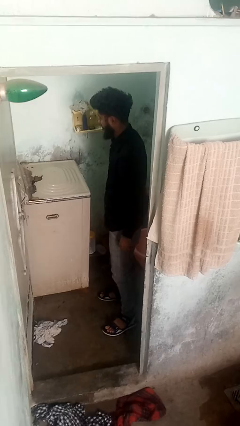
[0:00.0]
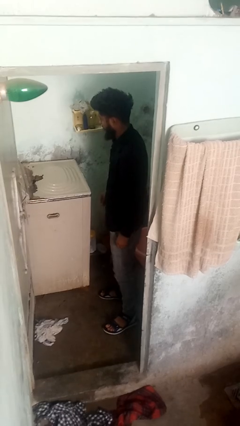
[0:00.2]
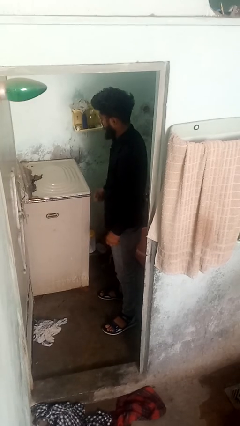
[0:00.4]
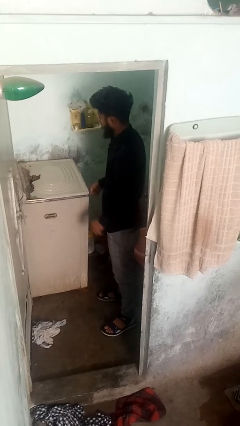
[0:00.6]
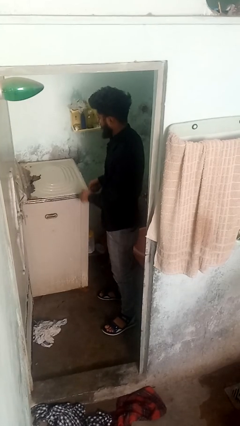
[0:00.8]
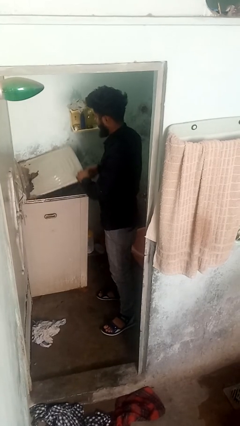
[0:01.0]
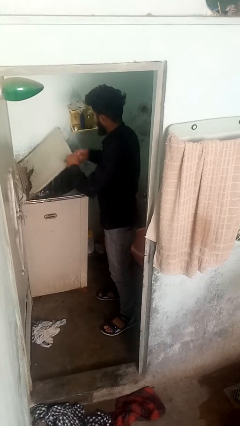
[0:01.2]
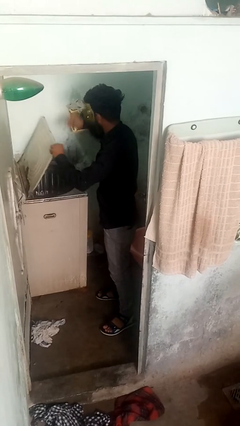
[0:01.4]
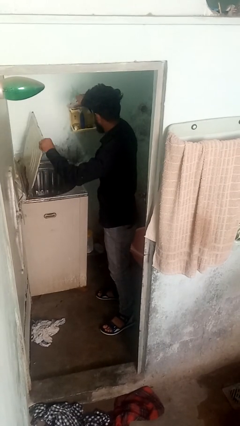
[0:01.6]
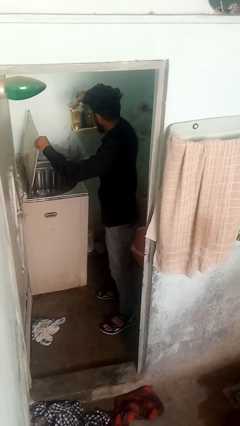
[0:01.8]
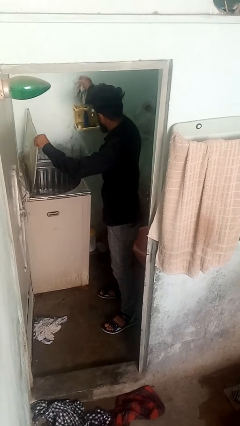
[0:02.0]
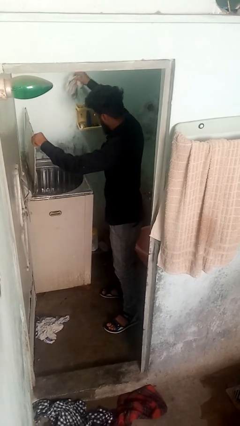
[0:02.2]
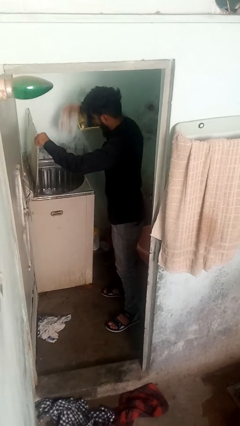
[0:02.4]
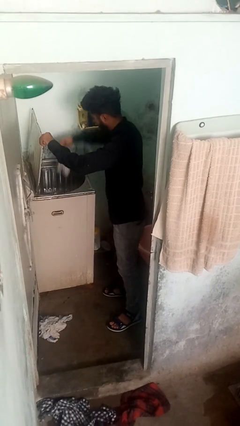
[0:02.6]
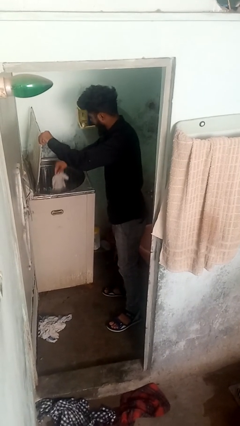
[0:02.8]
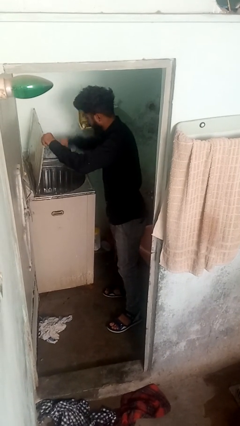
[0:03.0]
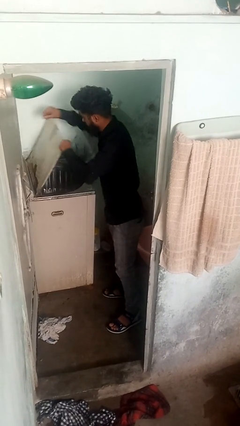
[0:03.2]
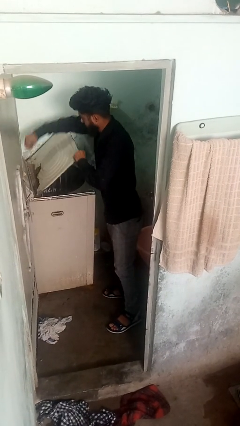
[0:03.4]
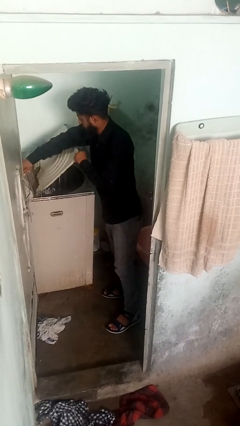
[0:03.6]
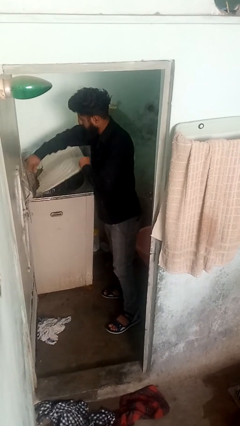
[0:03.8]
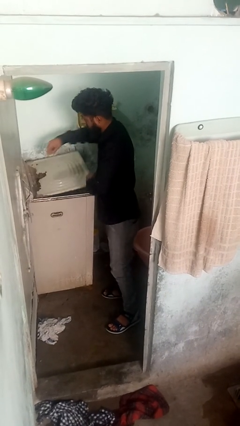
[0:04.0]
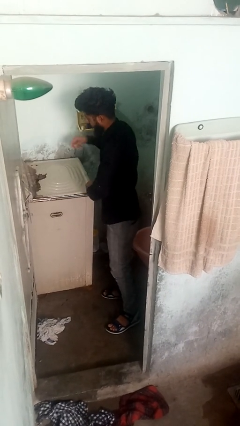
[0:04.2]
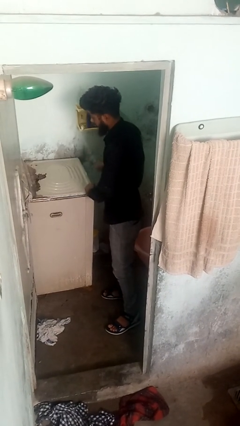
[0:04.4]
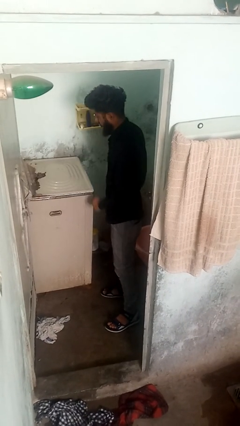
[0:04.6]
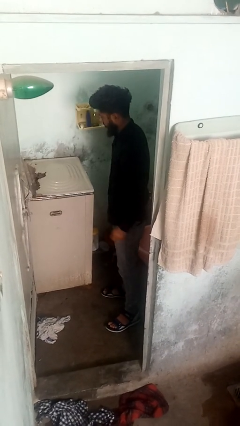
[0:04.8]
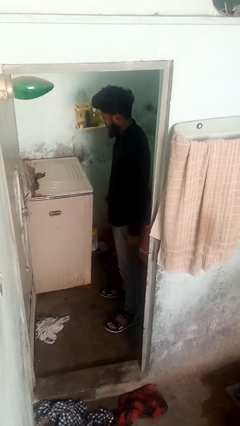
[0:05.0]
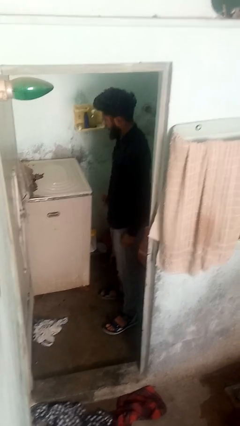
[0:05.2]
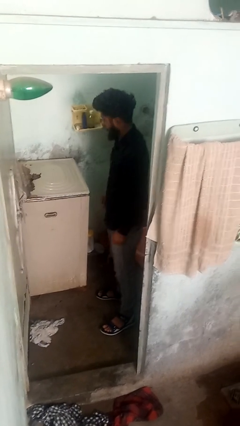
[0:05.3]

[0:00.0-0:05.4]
person loads clotheswasher

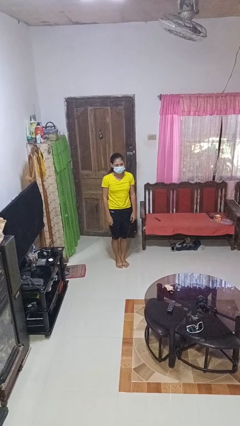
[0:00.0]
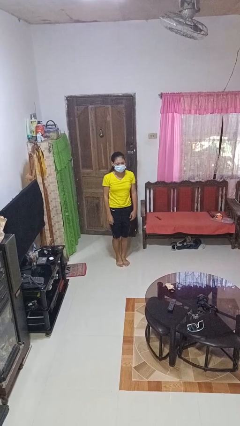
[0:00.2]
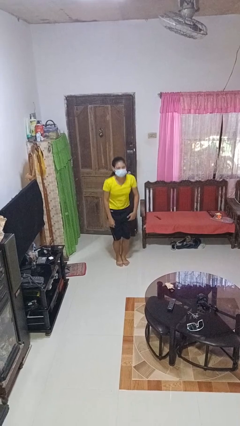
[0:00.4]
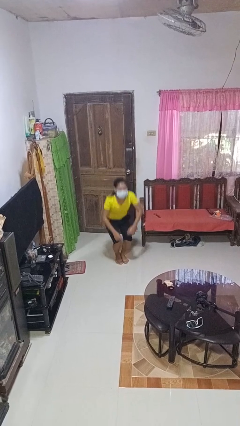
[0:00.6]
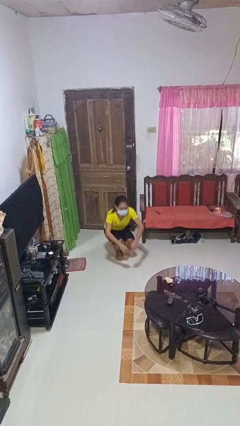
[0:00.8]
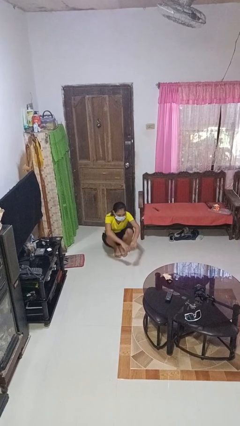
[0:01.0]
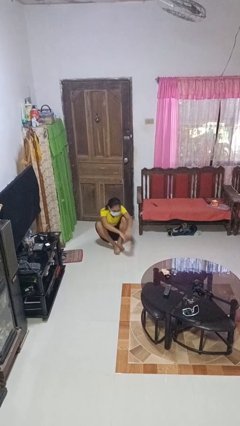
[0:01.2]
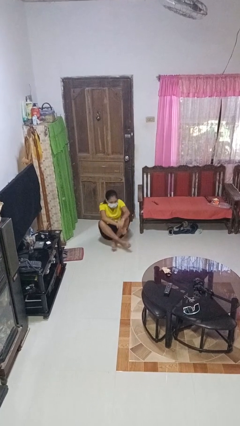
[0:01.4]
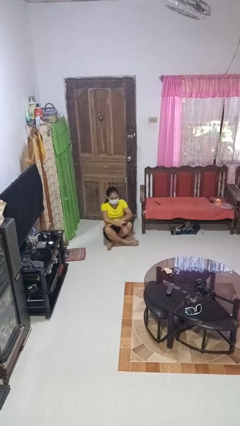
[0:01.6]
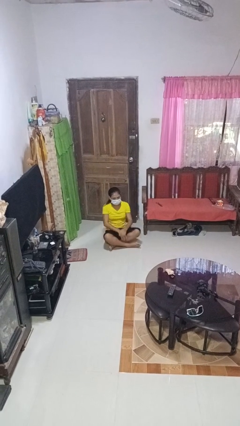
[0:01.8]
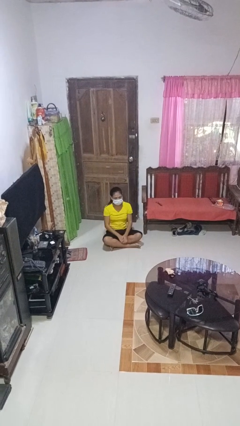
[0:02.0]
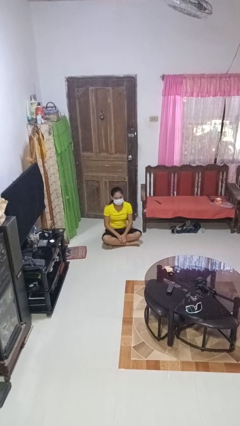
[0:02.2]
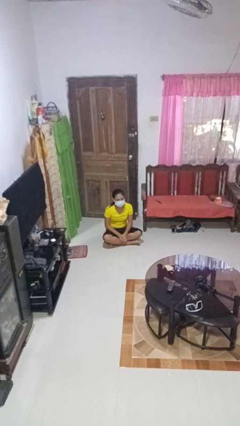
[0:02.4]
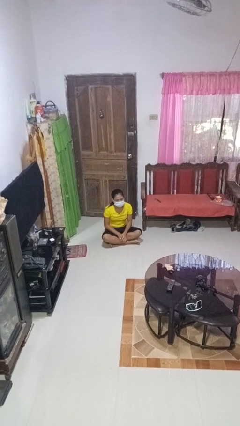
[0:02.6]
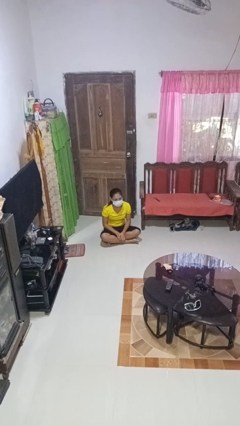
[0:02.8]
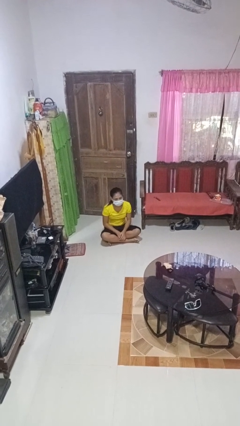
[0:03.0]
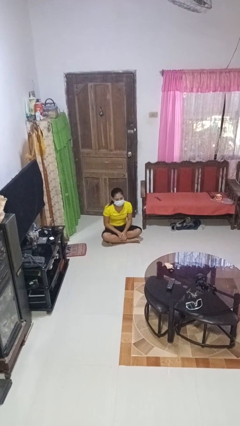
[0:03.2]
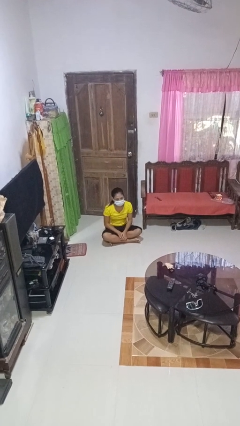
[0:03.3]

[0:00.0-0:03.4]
person sits crisscross

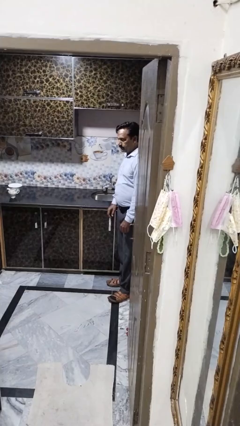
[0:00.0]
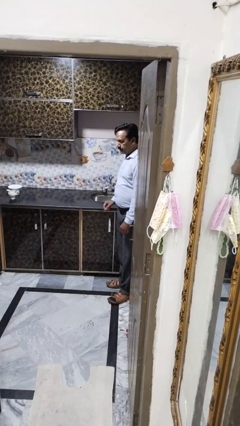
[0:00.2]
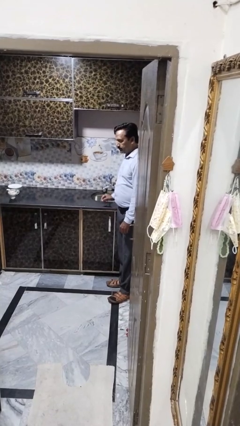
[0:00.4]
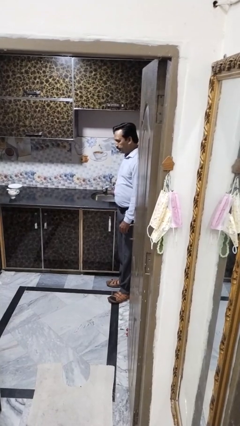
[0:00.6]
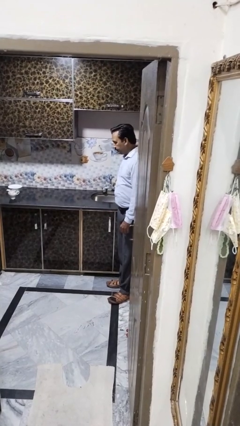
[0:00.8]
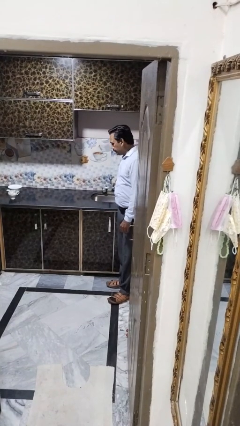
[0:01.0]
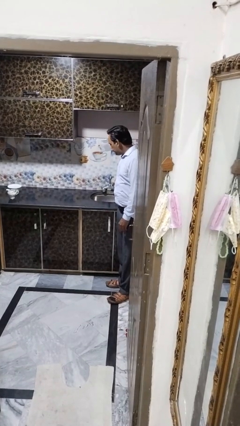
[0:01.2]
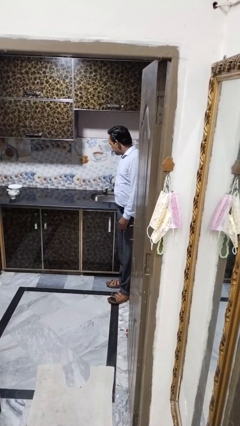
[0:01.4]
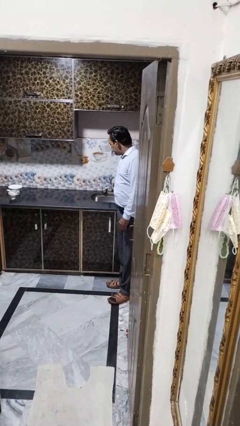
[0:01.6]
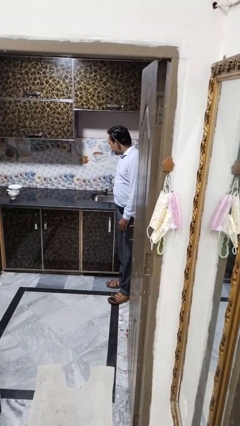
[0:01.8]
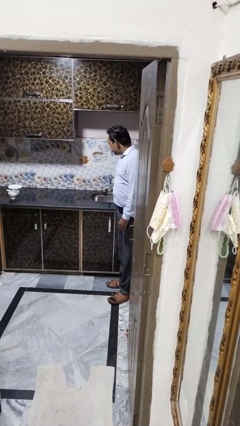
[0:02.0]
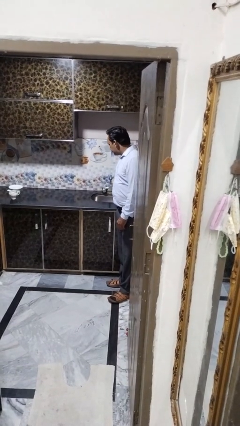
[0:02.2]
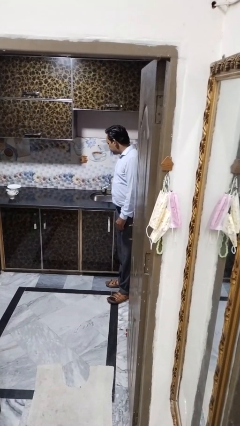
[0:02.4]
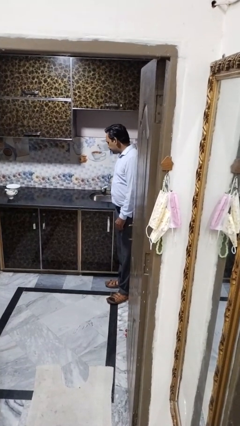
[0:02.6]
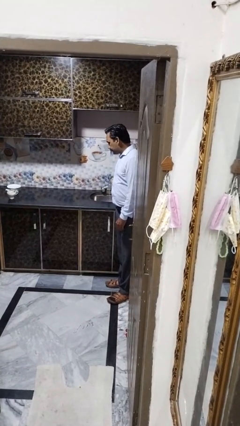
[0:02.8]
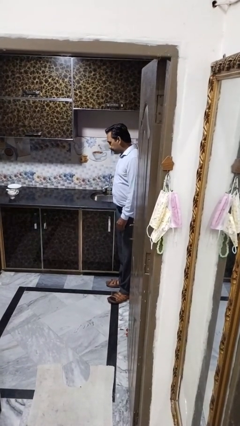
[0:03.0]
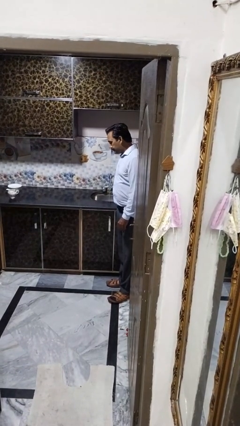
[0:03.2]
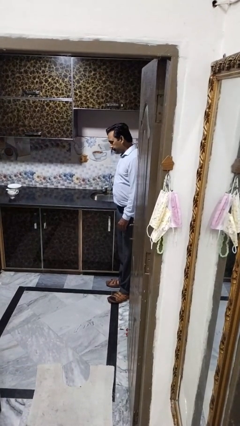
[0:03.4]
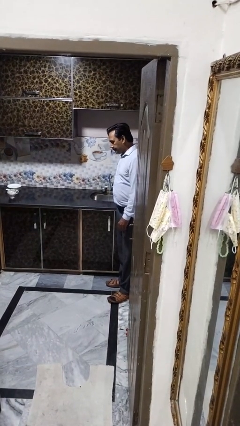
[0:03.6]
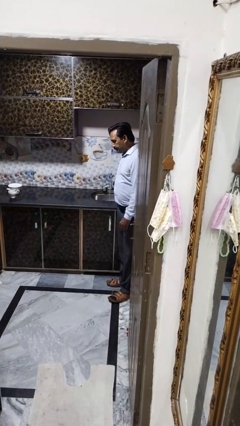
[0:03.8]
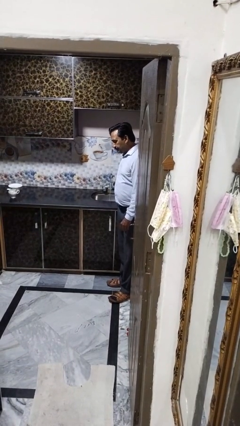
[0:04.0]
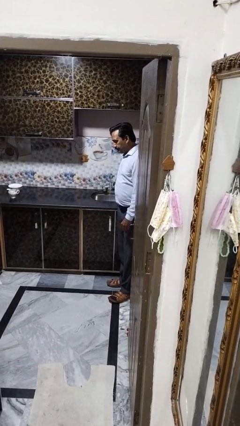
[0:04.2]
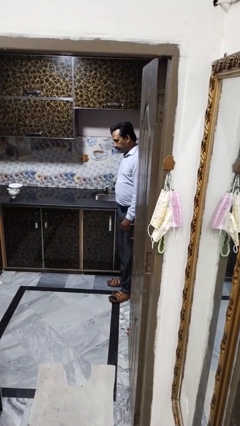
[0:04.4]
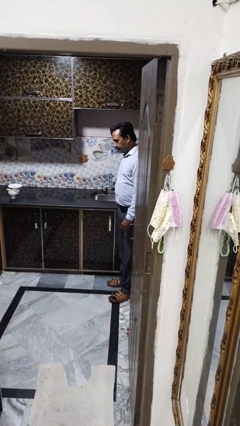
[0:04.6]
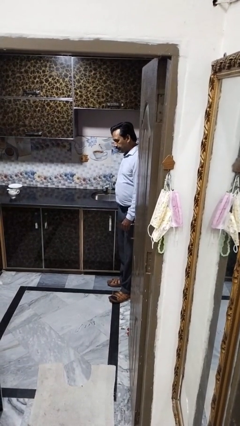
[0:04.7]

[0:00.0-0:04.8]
person turns on faucet

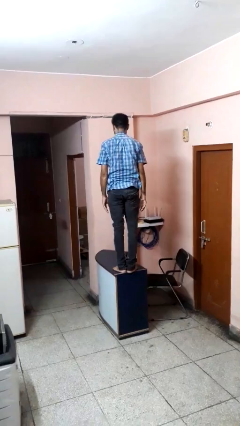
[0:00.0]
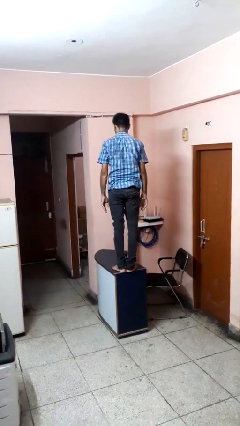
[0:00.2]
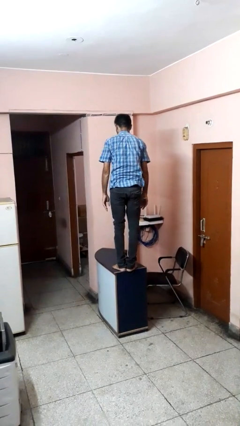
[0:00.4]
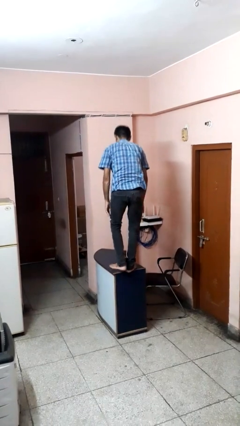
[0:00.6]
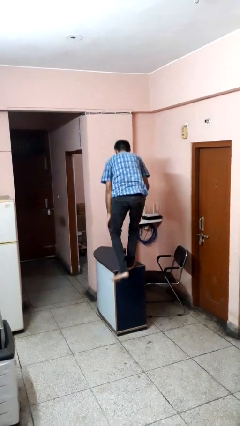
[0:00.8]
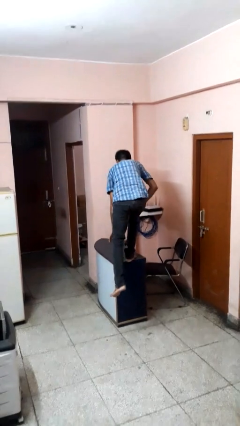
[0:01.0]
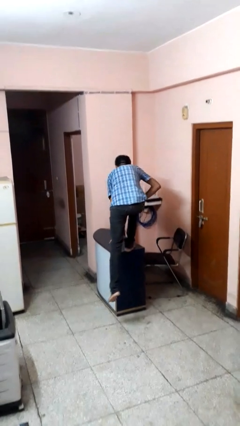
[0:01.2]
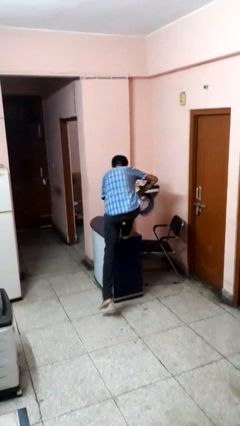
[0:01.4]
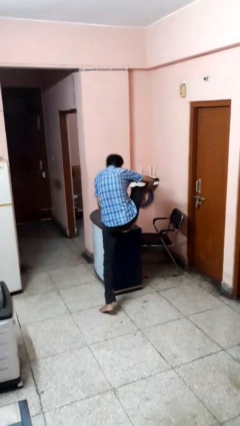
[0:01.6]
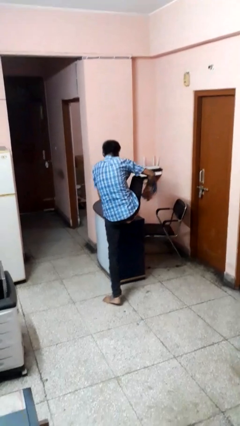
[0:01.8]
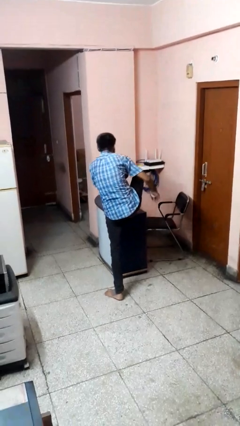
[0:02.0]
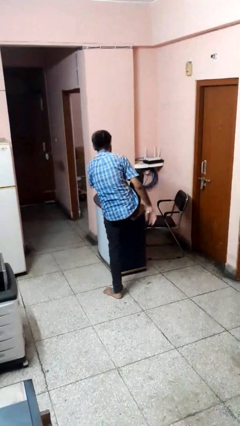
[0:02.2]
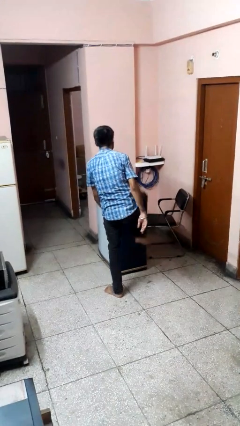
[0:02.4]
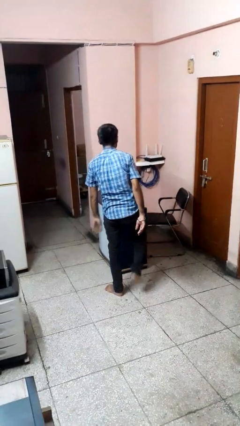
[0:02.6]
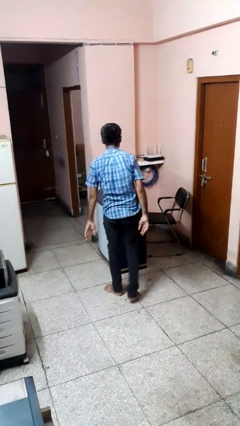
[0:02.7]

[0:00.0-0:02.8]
person climbs off table

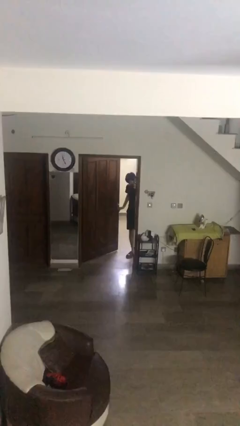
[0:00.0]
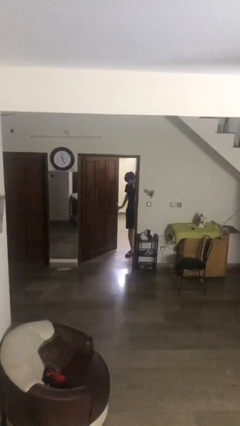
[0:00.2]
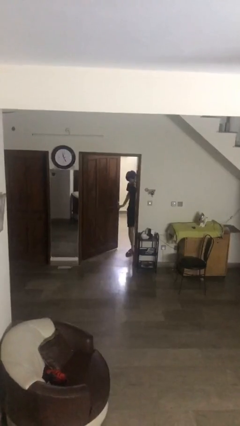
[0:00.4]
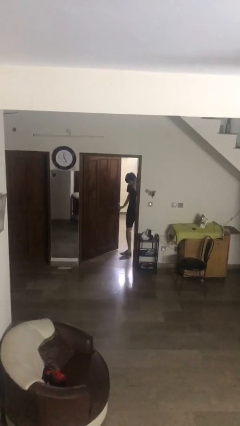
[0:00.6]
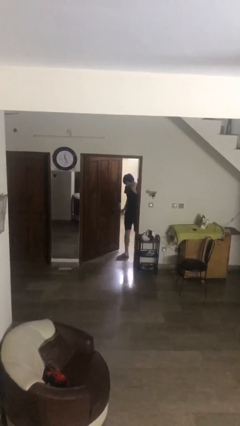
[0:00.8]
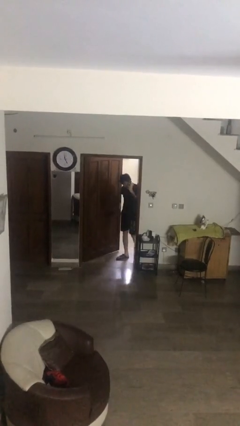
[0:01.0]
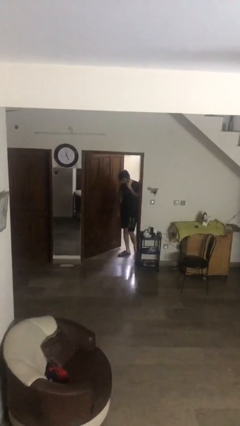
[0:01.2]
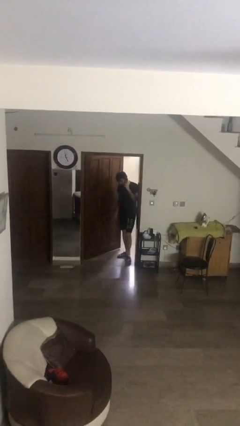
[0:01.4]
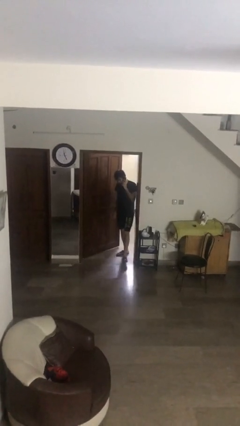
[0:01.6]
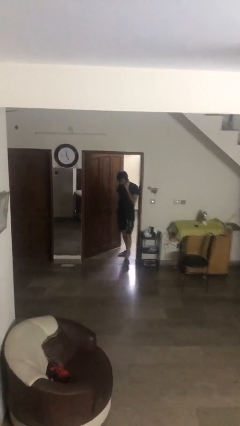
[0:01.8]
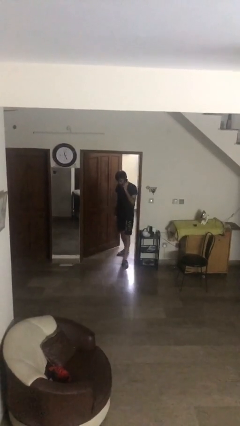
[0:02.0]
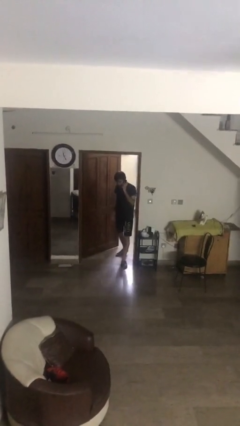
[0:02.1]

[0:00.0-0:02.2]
person enters scene through structure
